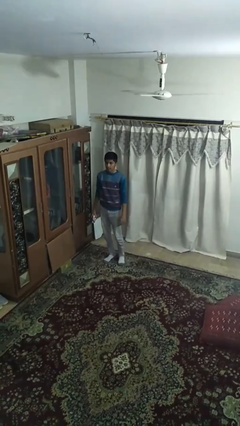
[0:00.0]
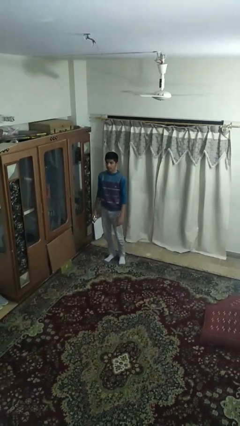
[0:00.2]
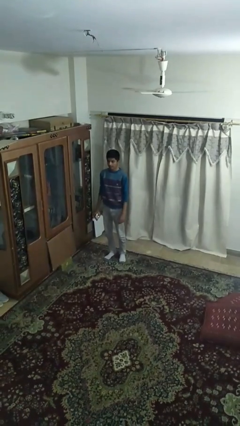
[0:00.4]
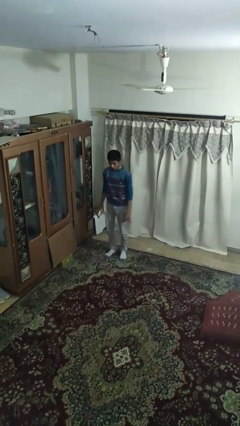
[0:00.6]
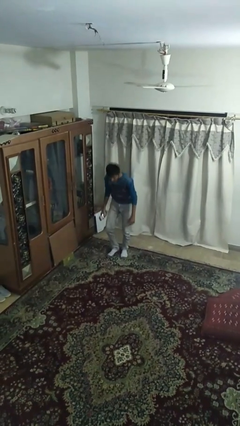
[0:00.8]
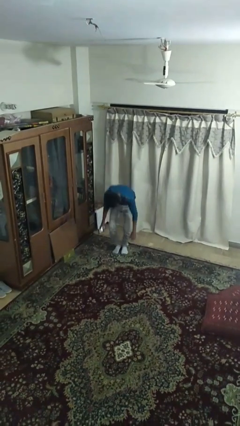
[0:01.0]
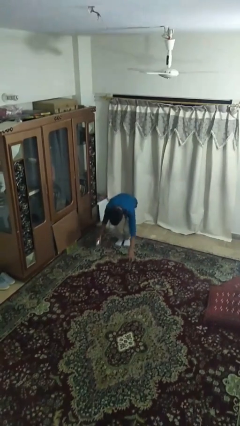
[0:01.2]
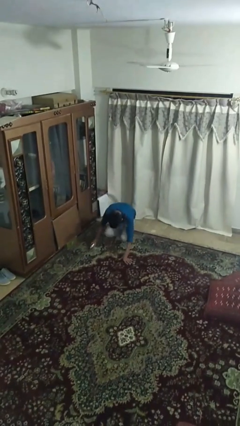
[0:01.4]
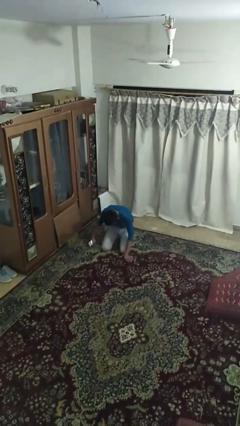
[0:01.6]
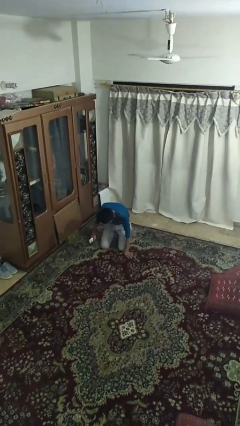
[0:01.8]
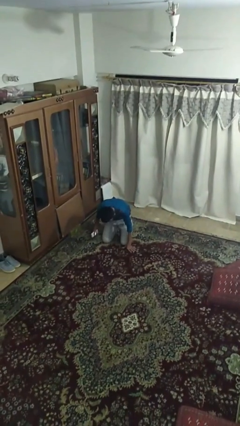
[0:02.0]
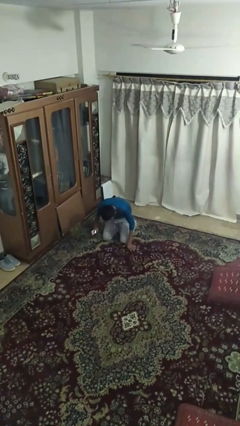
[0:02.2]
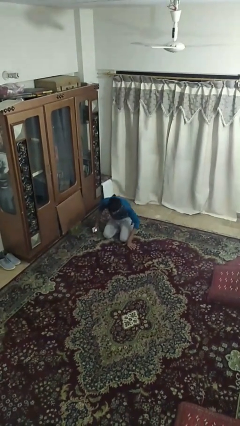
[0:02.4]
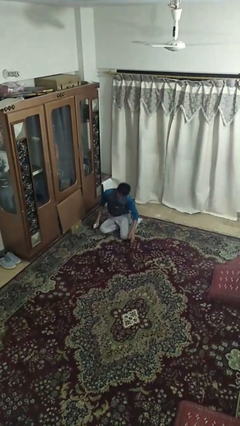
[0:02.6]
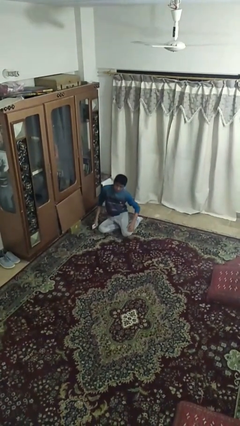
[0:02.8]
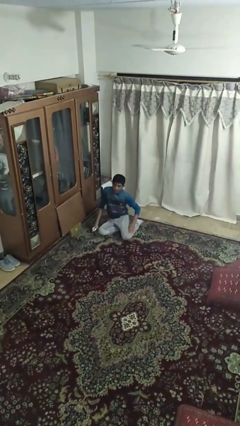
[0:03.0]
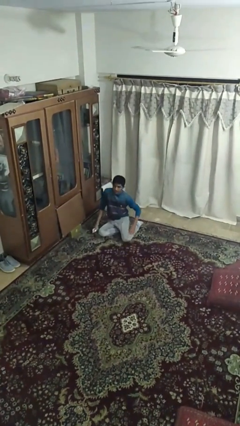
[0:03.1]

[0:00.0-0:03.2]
person sits down

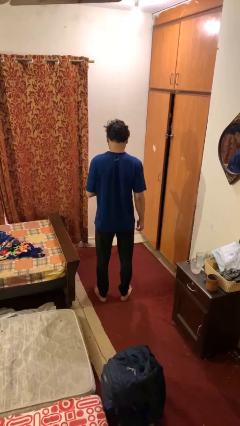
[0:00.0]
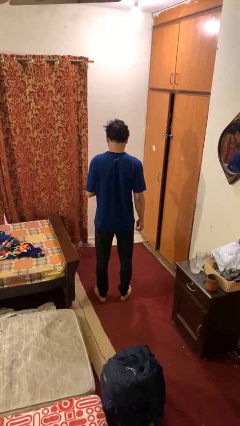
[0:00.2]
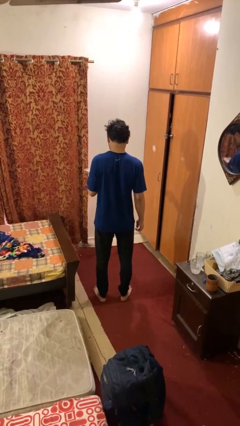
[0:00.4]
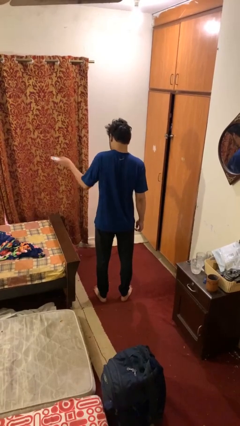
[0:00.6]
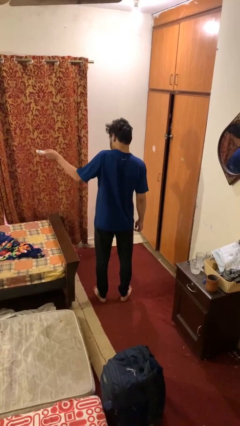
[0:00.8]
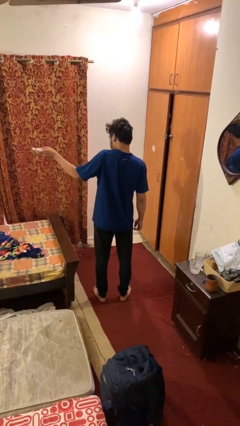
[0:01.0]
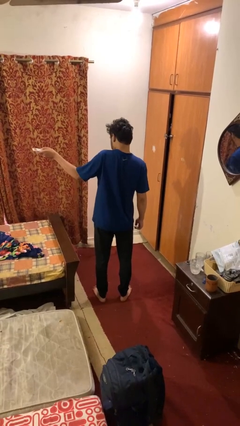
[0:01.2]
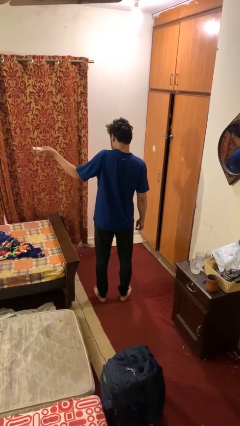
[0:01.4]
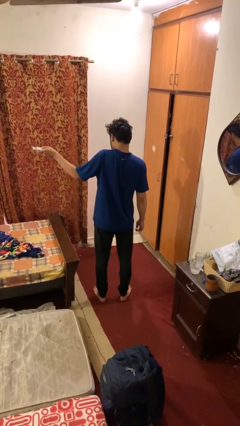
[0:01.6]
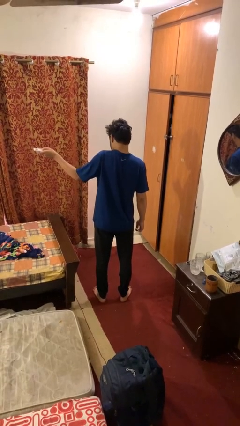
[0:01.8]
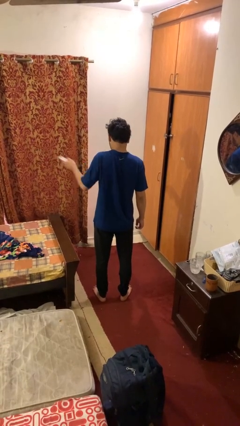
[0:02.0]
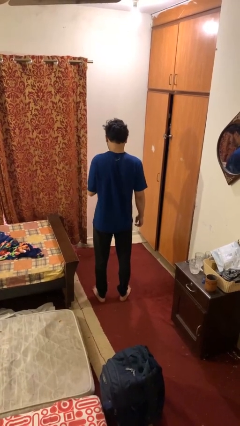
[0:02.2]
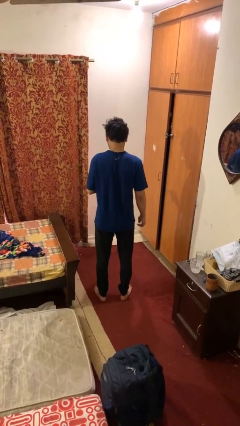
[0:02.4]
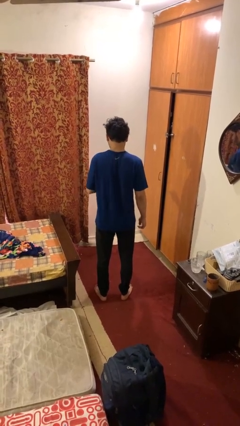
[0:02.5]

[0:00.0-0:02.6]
person uses television remote

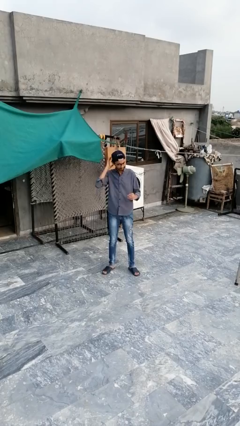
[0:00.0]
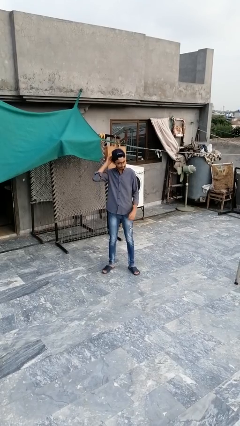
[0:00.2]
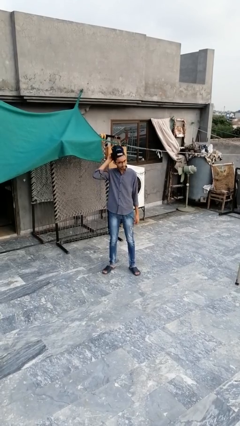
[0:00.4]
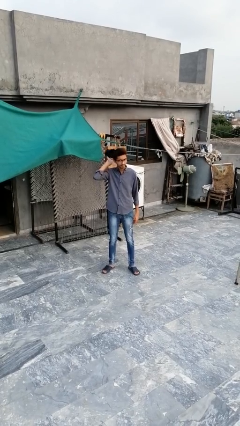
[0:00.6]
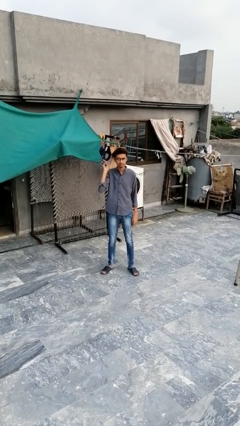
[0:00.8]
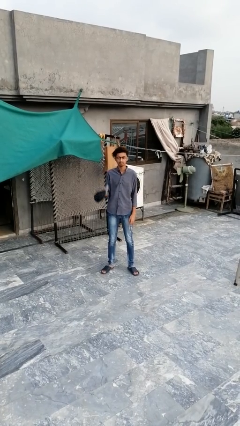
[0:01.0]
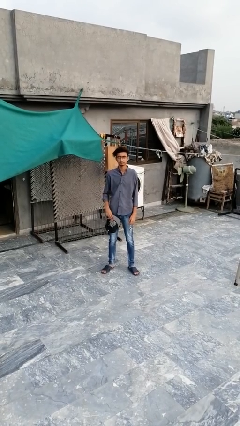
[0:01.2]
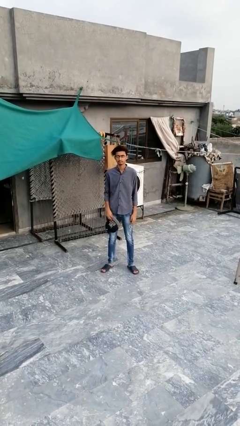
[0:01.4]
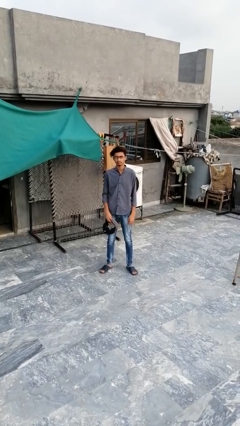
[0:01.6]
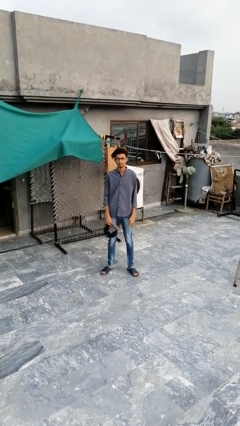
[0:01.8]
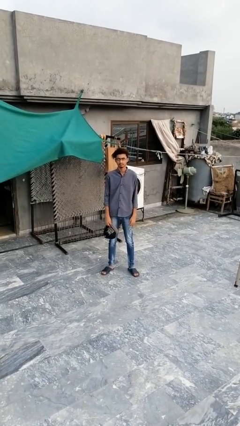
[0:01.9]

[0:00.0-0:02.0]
person takes off hat

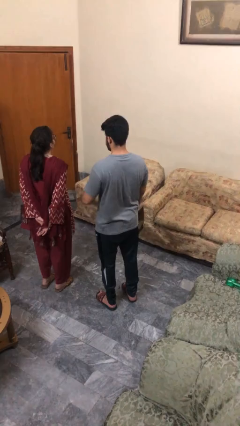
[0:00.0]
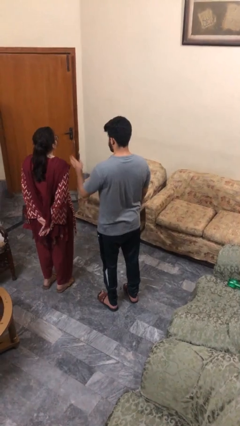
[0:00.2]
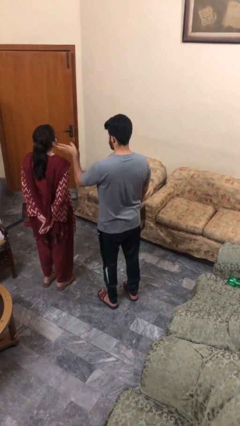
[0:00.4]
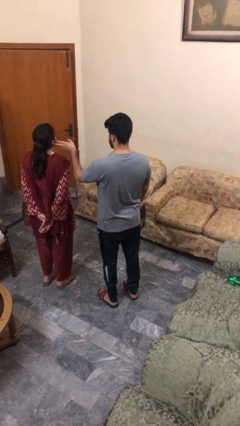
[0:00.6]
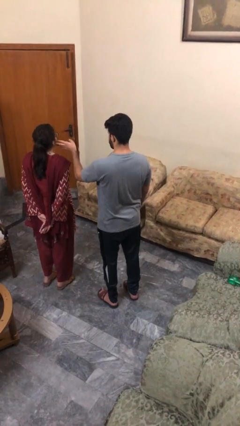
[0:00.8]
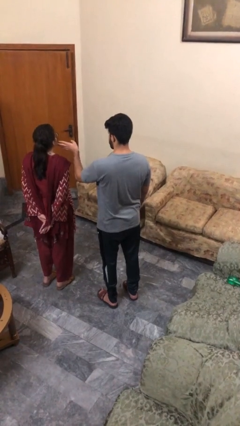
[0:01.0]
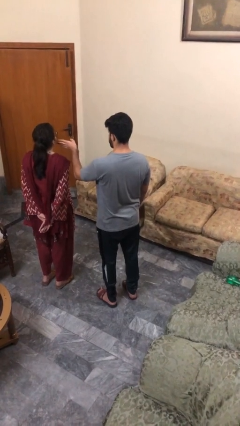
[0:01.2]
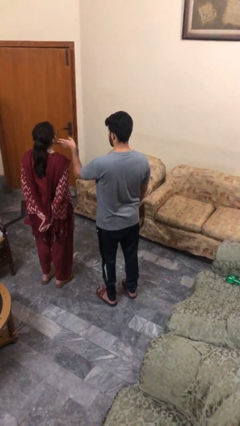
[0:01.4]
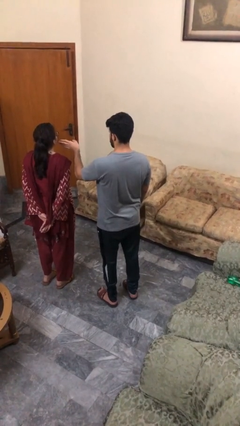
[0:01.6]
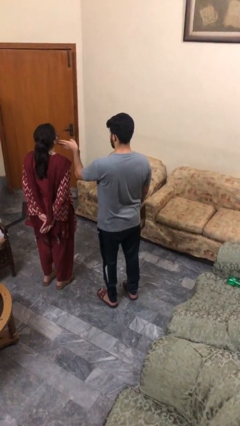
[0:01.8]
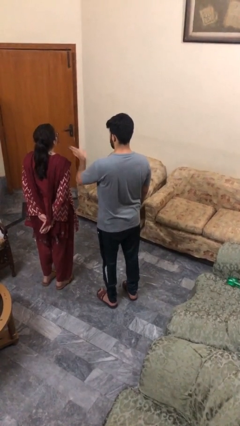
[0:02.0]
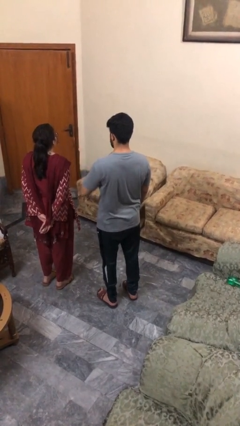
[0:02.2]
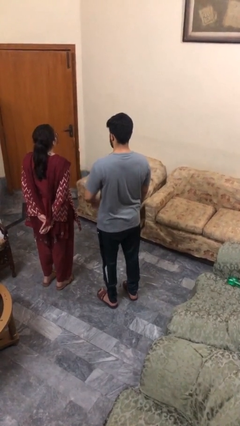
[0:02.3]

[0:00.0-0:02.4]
person touches face of person

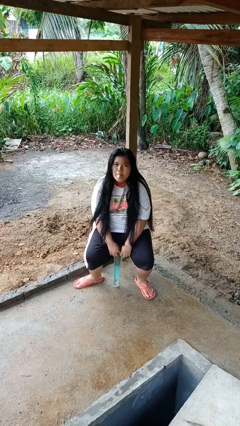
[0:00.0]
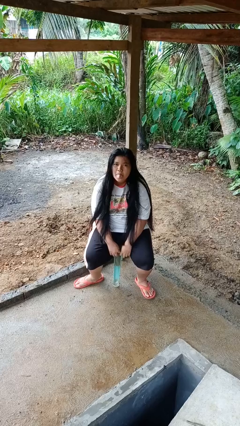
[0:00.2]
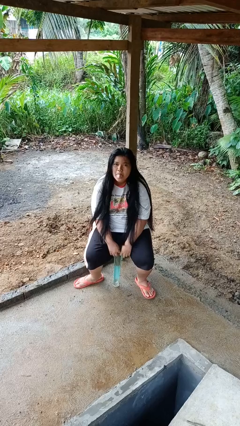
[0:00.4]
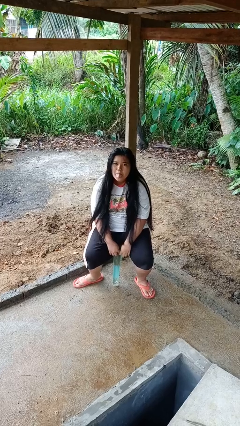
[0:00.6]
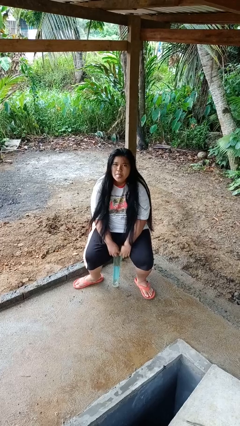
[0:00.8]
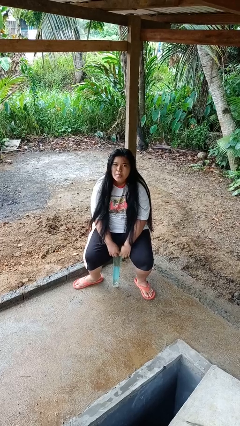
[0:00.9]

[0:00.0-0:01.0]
person sticks out tongue

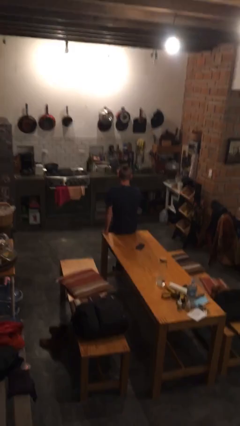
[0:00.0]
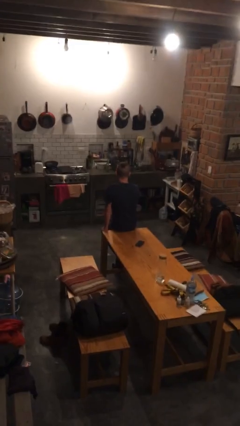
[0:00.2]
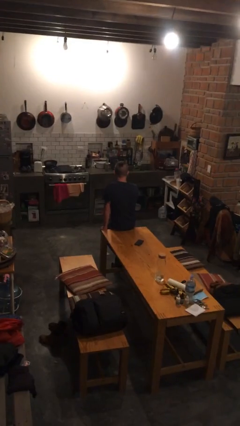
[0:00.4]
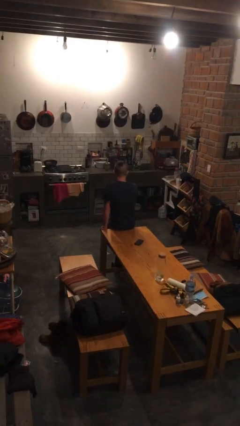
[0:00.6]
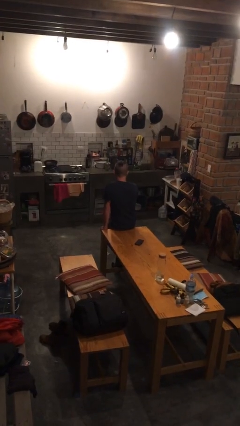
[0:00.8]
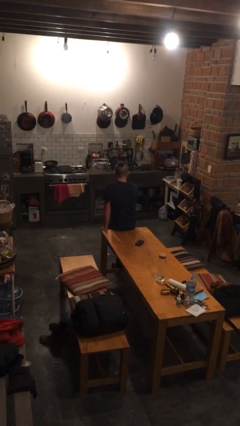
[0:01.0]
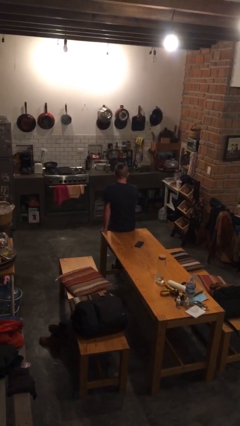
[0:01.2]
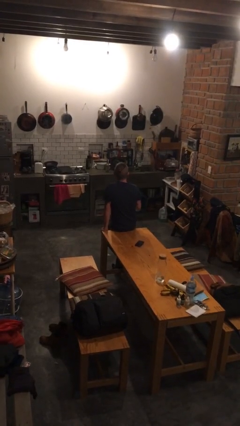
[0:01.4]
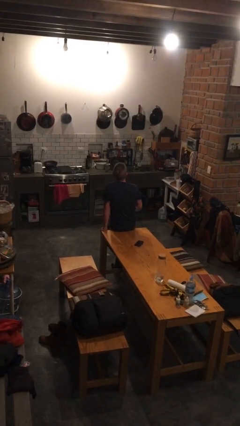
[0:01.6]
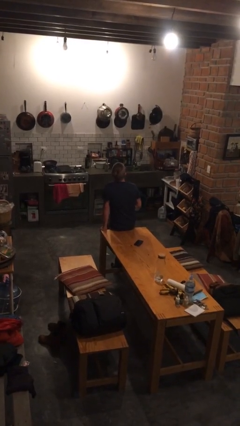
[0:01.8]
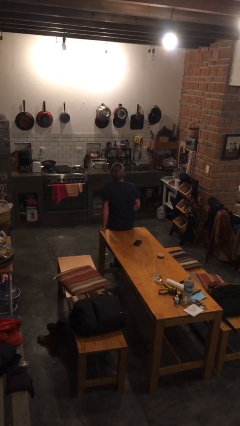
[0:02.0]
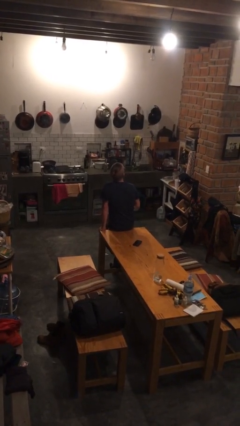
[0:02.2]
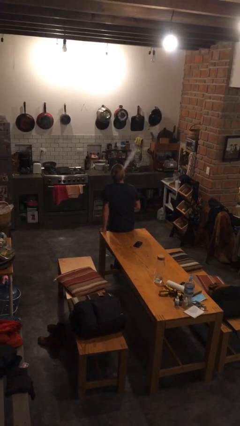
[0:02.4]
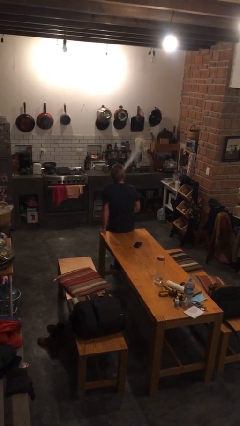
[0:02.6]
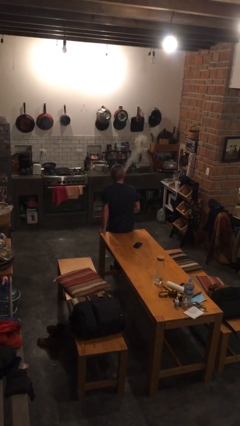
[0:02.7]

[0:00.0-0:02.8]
person vapes

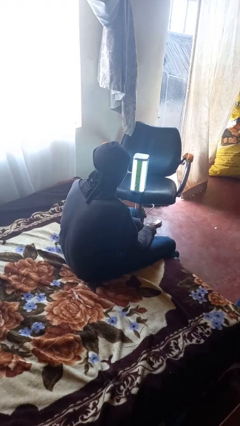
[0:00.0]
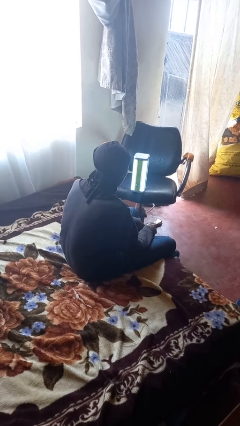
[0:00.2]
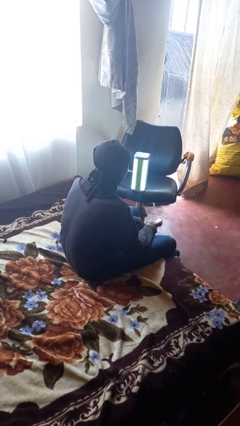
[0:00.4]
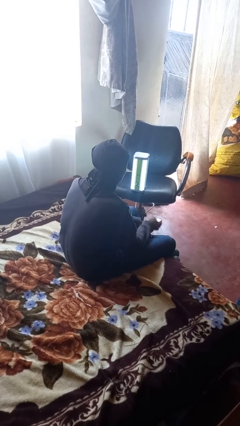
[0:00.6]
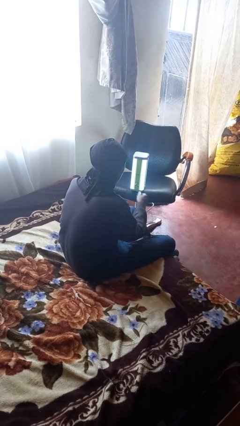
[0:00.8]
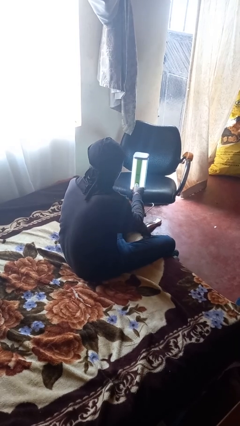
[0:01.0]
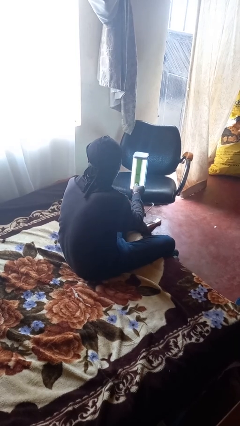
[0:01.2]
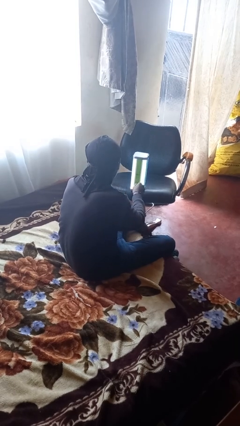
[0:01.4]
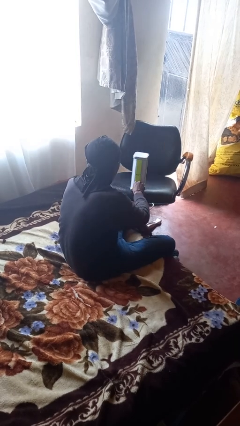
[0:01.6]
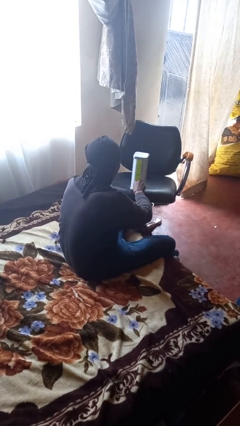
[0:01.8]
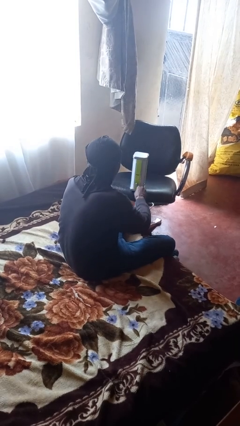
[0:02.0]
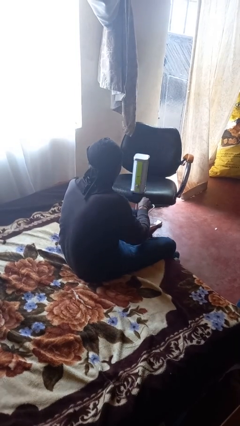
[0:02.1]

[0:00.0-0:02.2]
person turns off lamp

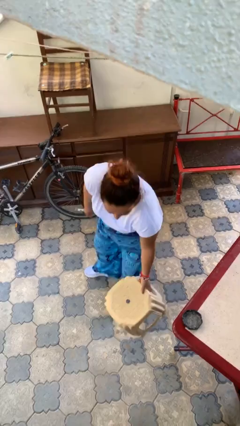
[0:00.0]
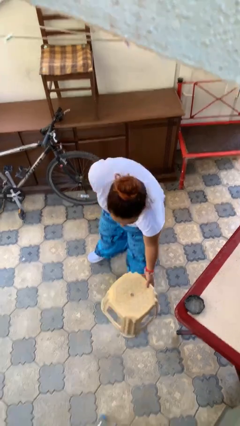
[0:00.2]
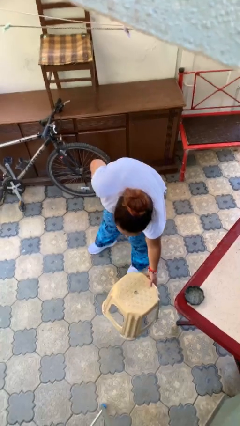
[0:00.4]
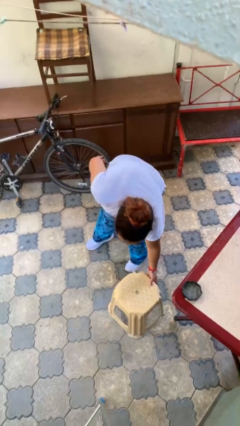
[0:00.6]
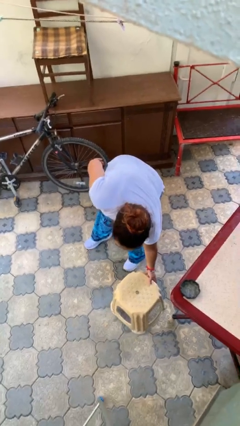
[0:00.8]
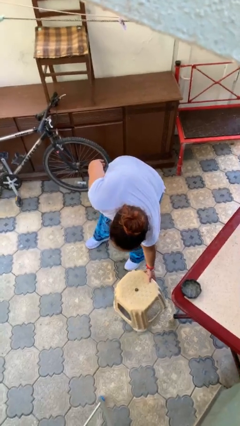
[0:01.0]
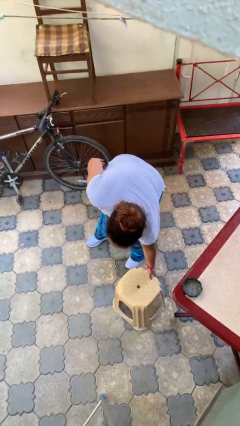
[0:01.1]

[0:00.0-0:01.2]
person puts down object on floor
